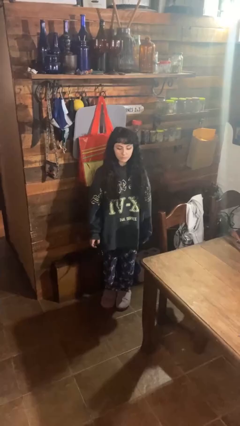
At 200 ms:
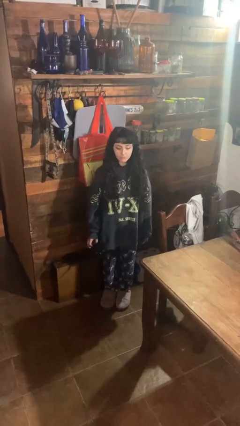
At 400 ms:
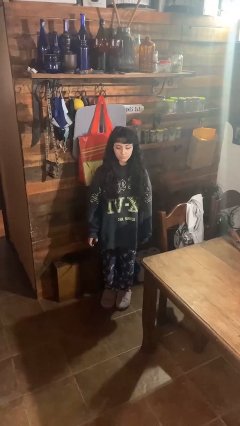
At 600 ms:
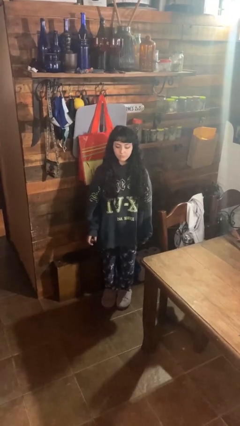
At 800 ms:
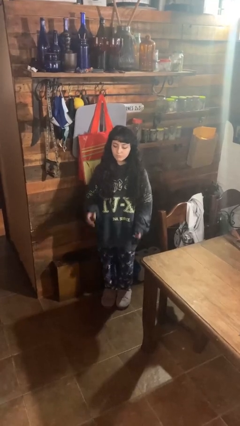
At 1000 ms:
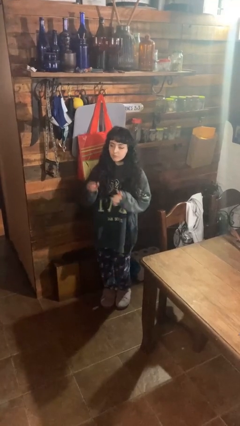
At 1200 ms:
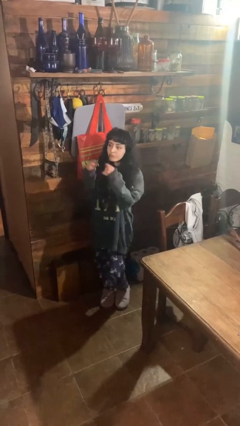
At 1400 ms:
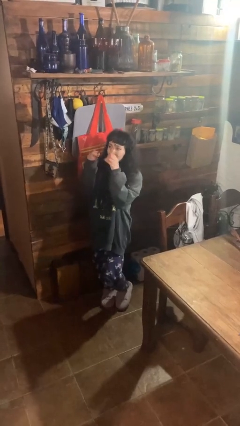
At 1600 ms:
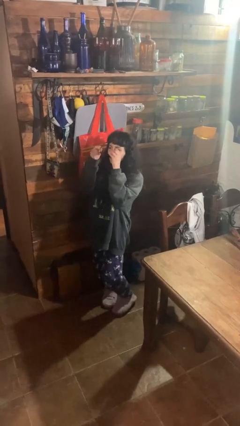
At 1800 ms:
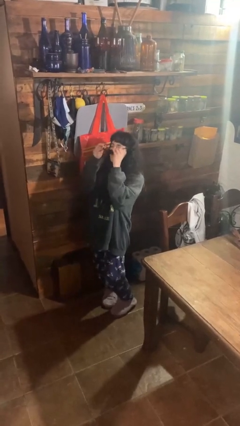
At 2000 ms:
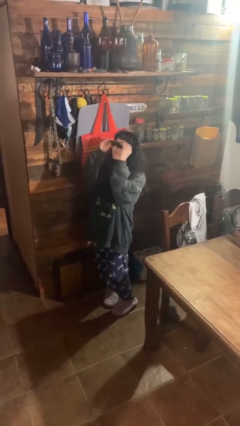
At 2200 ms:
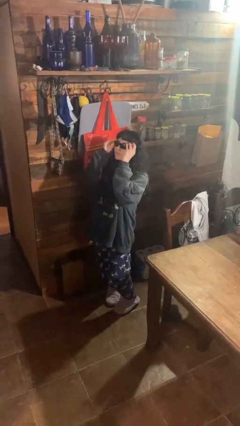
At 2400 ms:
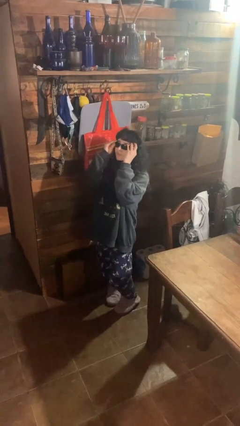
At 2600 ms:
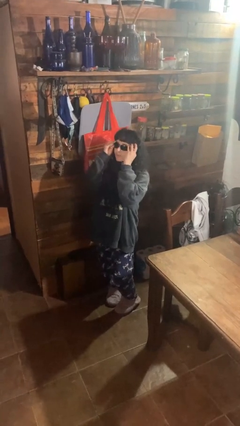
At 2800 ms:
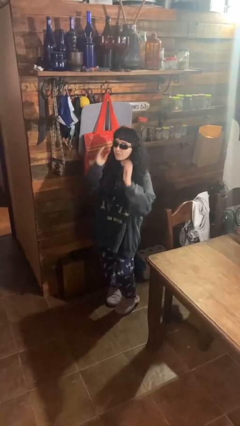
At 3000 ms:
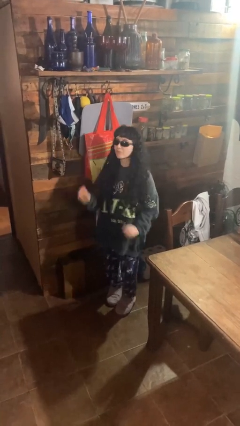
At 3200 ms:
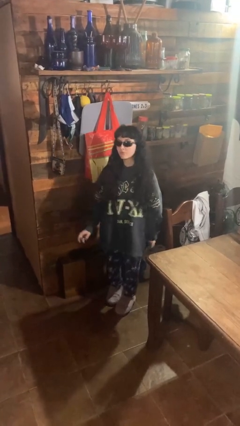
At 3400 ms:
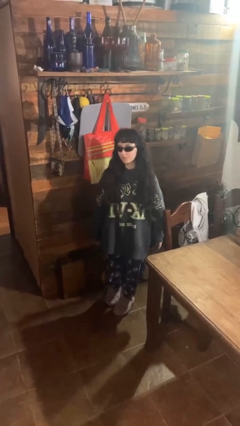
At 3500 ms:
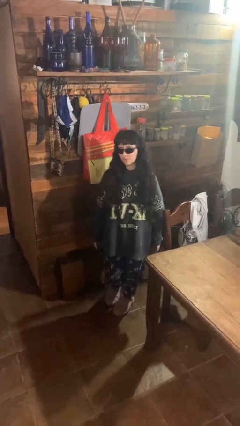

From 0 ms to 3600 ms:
person puts on sunglasses

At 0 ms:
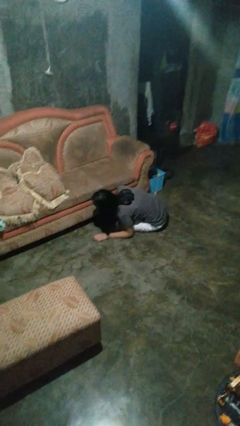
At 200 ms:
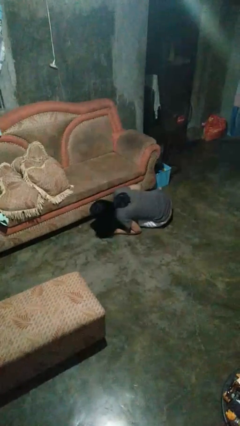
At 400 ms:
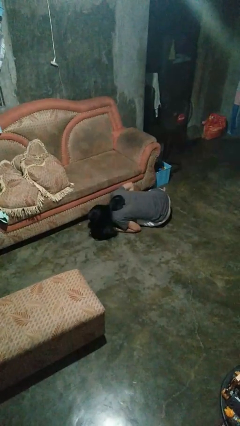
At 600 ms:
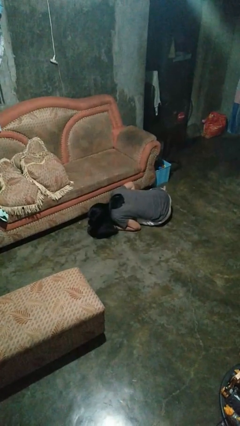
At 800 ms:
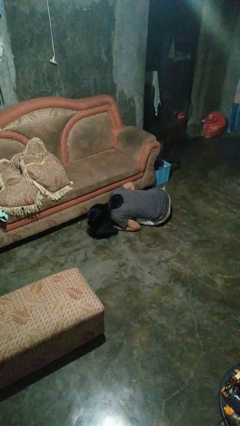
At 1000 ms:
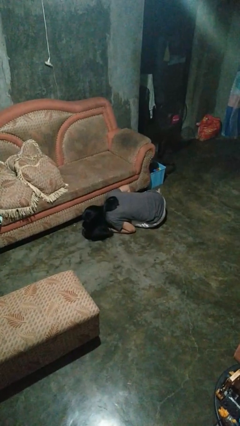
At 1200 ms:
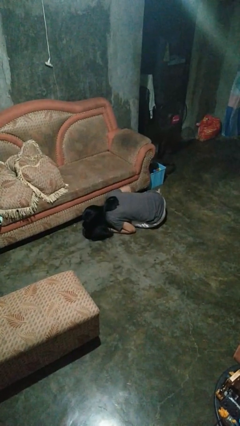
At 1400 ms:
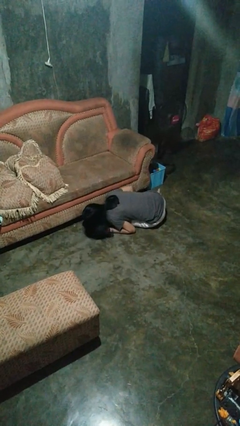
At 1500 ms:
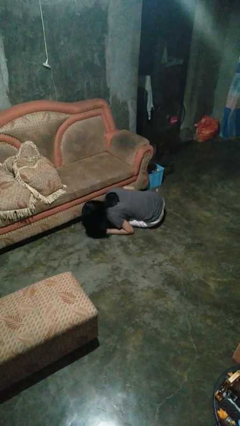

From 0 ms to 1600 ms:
person searches under couch

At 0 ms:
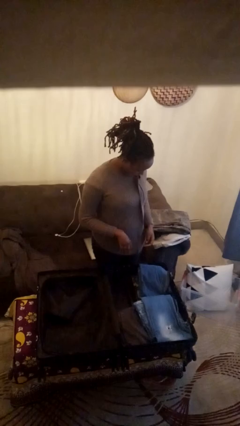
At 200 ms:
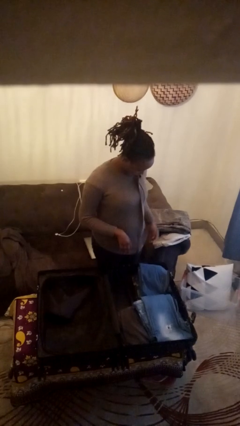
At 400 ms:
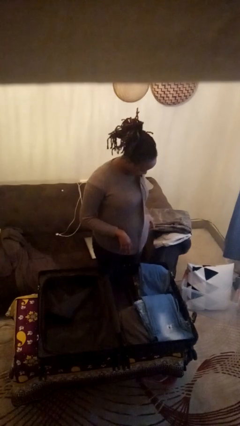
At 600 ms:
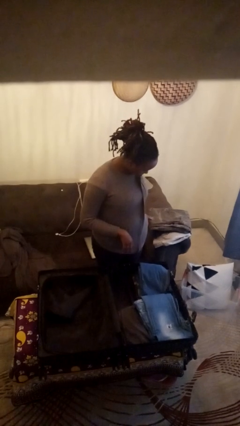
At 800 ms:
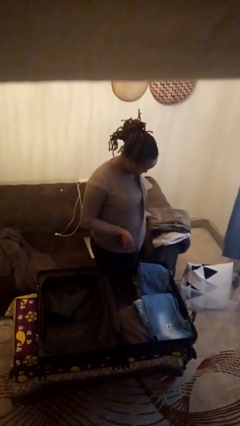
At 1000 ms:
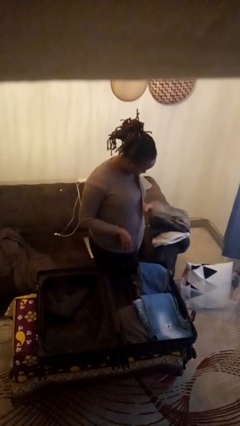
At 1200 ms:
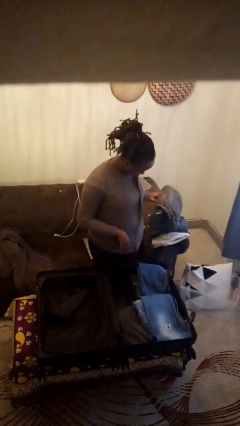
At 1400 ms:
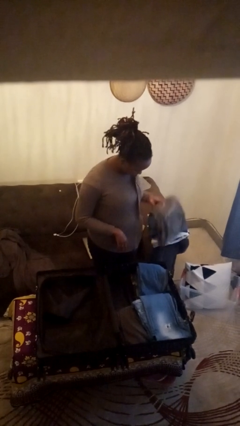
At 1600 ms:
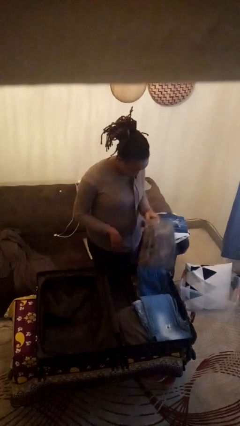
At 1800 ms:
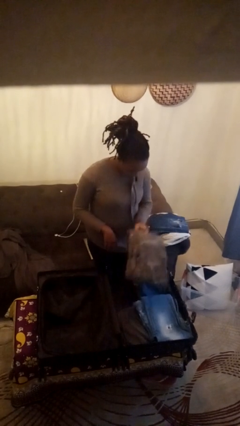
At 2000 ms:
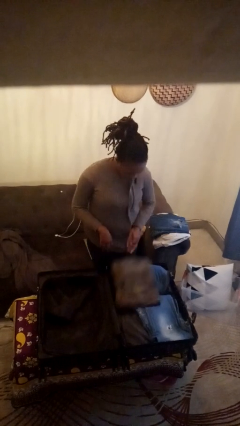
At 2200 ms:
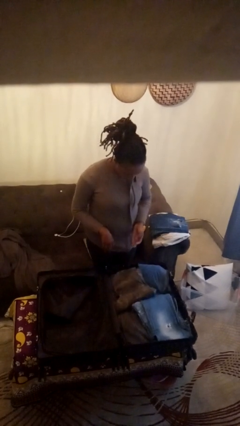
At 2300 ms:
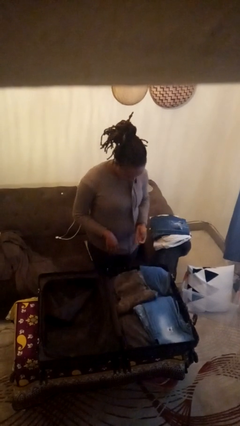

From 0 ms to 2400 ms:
person loads clothes into suitcase

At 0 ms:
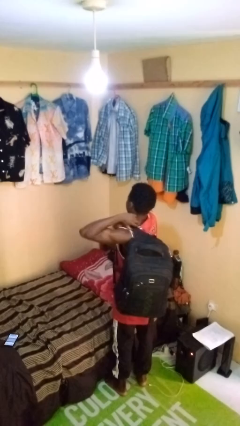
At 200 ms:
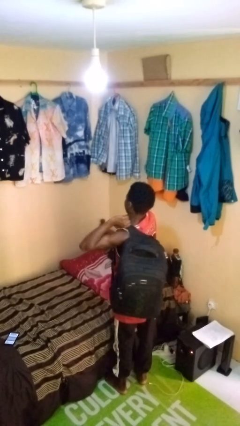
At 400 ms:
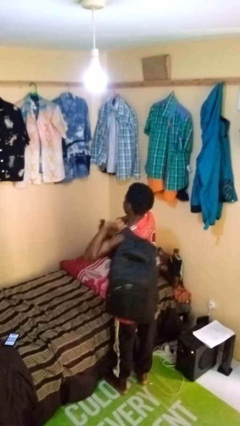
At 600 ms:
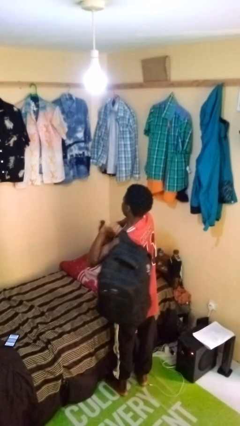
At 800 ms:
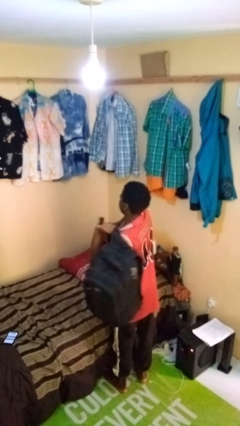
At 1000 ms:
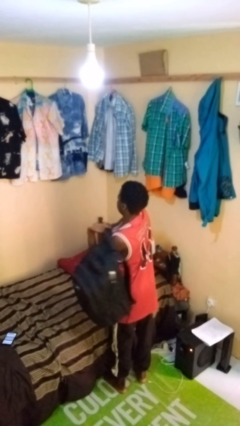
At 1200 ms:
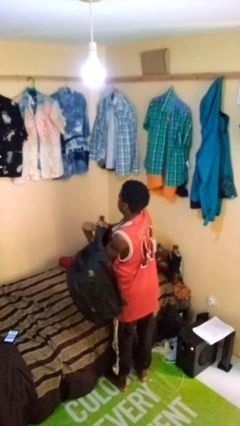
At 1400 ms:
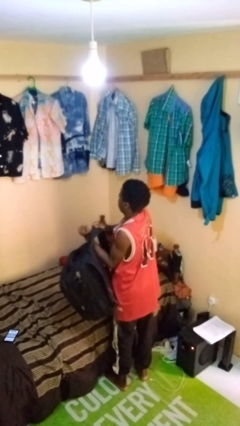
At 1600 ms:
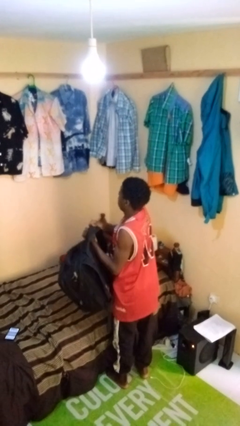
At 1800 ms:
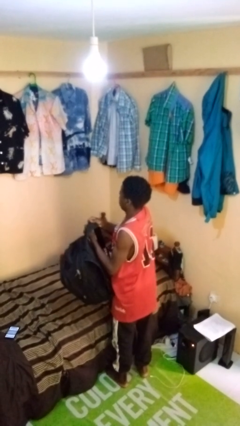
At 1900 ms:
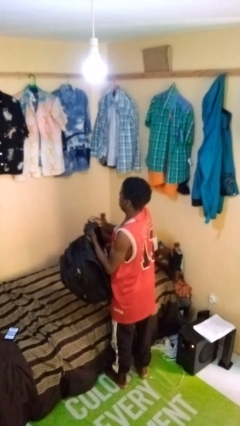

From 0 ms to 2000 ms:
person takes off backpack

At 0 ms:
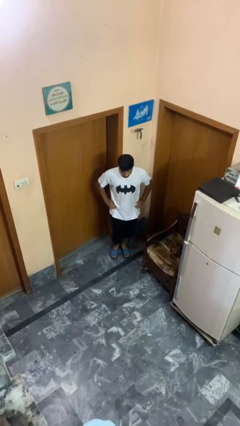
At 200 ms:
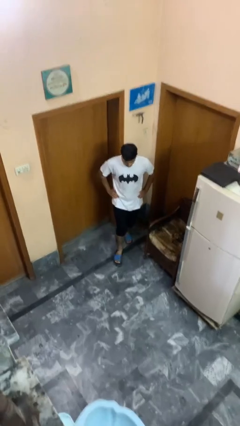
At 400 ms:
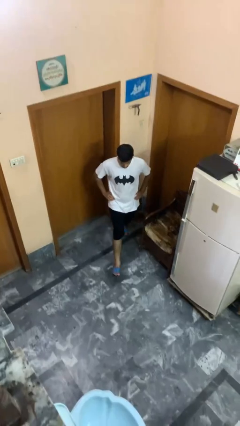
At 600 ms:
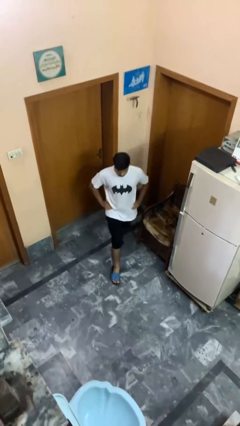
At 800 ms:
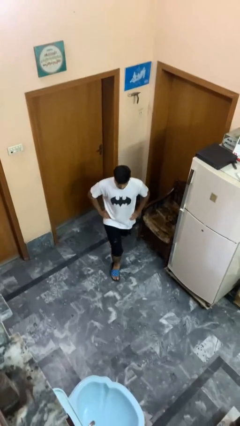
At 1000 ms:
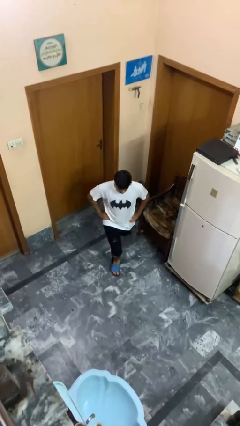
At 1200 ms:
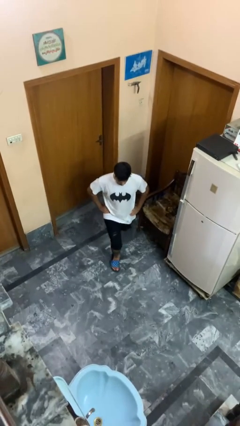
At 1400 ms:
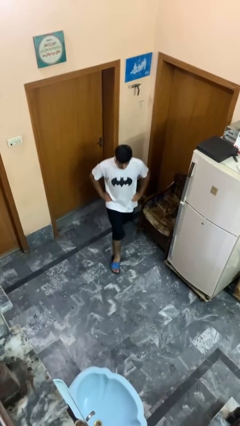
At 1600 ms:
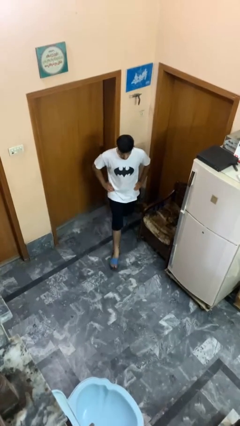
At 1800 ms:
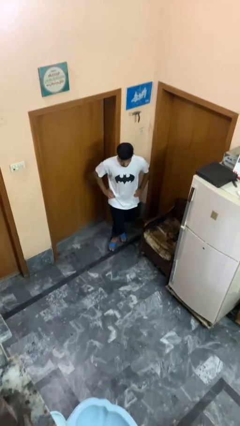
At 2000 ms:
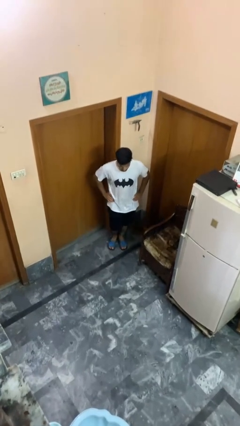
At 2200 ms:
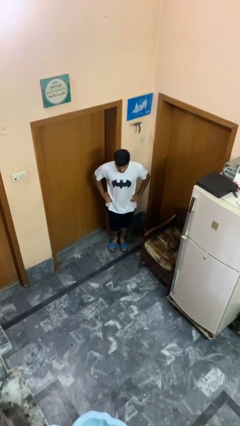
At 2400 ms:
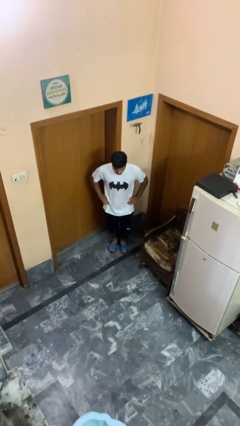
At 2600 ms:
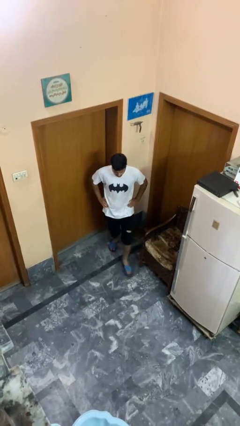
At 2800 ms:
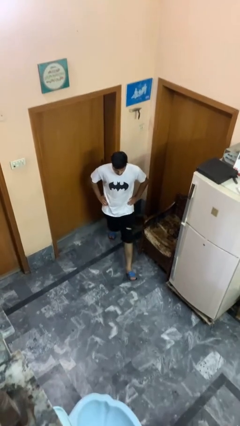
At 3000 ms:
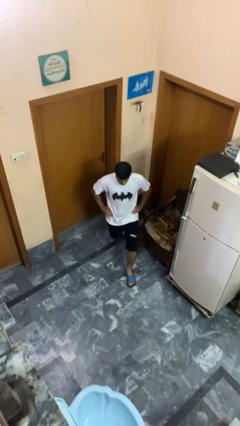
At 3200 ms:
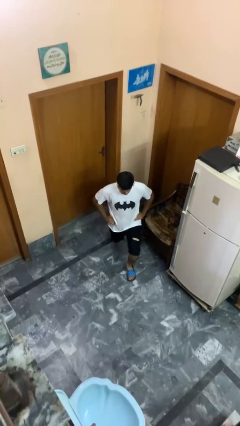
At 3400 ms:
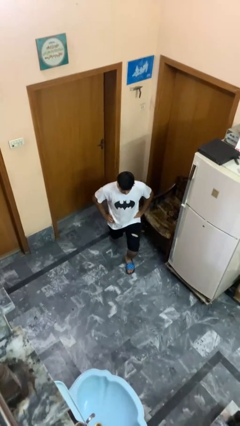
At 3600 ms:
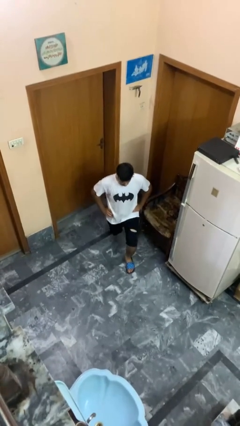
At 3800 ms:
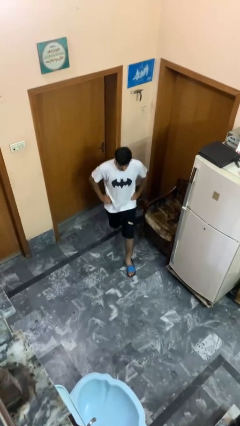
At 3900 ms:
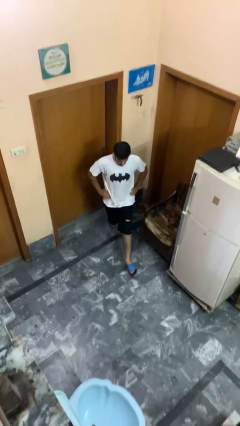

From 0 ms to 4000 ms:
person exercises with lunges

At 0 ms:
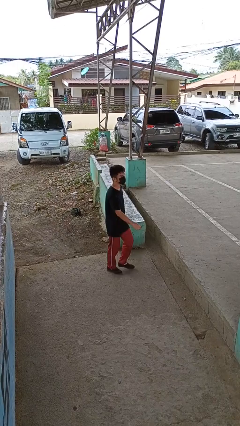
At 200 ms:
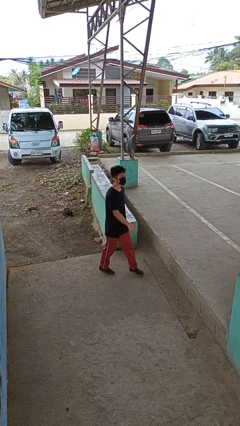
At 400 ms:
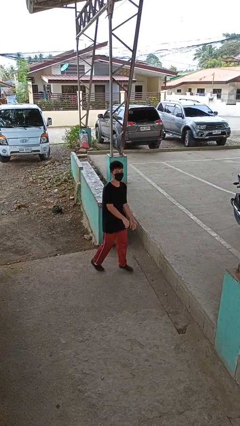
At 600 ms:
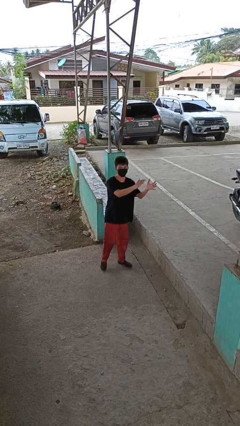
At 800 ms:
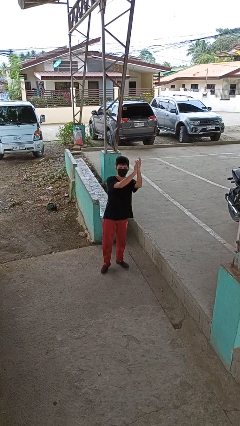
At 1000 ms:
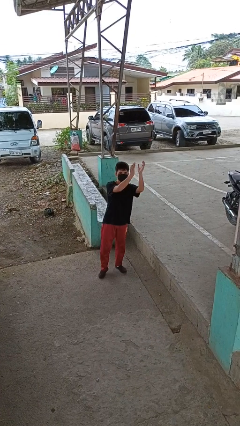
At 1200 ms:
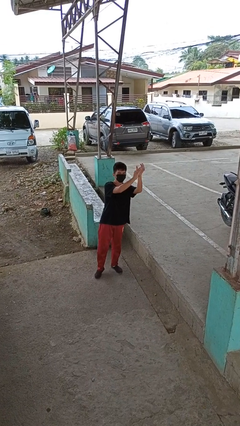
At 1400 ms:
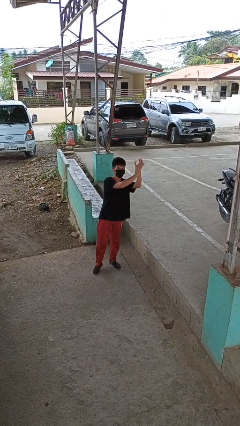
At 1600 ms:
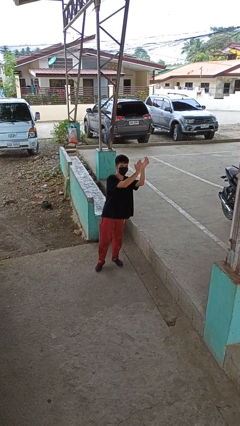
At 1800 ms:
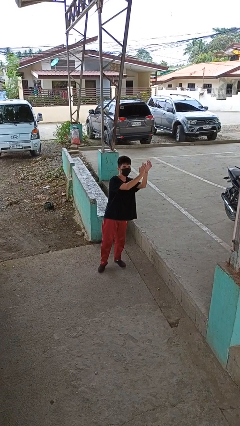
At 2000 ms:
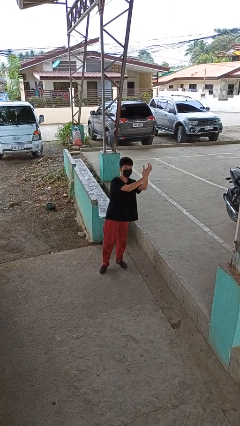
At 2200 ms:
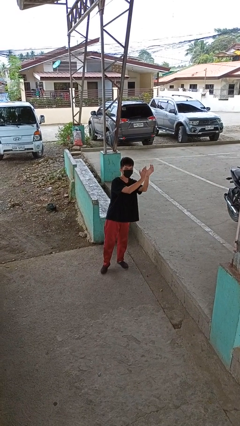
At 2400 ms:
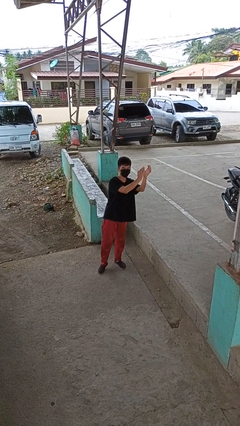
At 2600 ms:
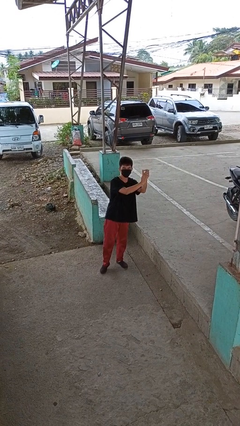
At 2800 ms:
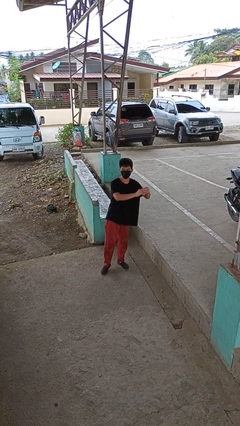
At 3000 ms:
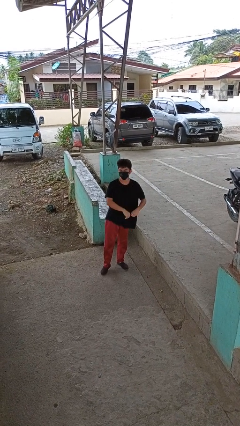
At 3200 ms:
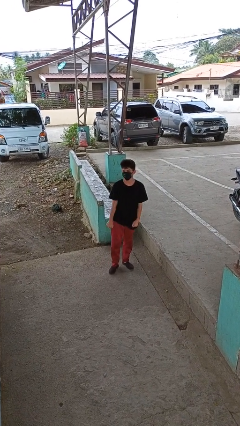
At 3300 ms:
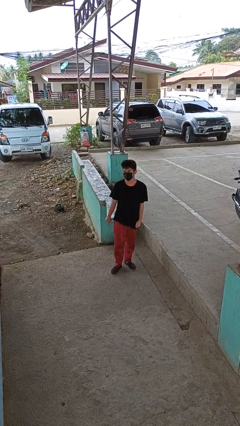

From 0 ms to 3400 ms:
person claps hands

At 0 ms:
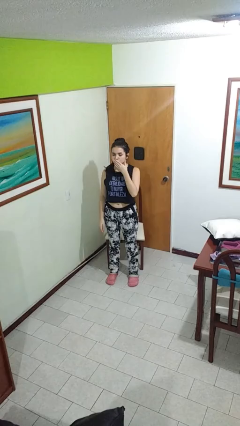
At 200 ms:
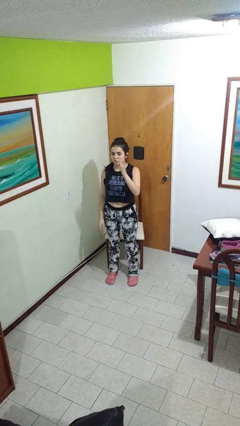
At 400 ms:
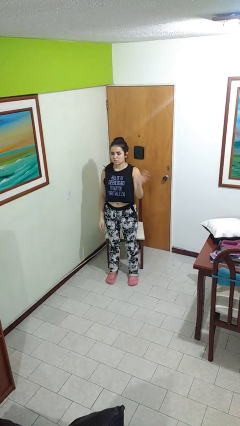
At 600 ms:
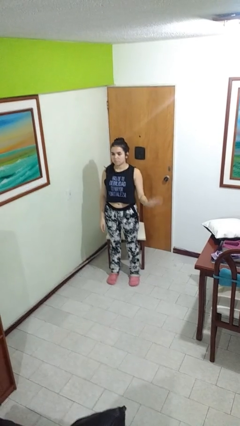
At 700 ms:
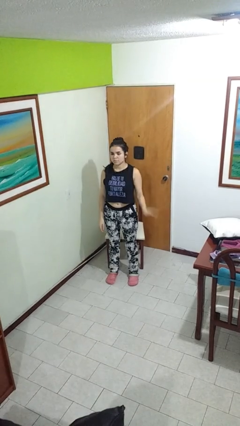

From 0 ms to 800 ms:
person gestures blow kiss
